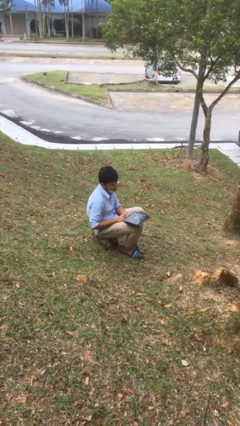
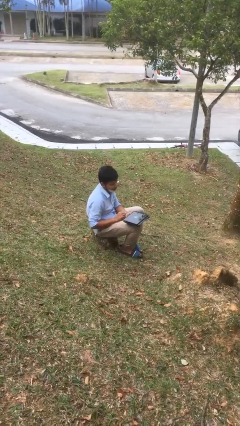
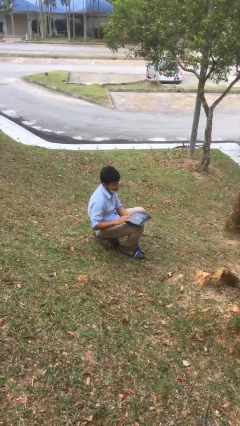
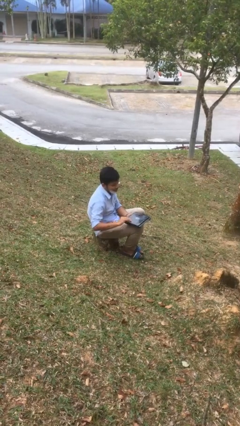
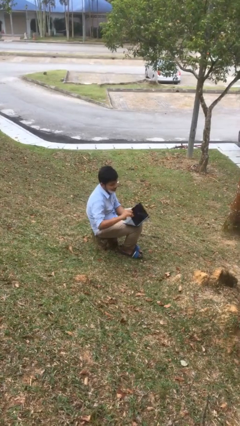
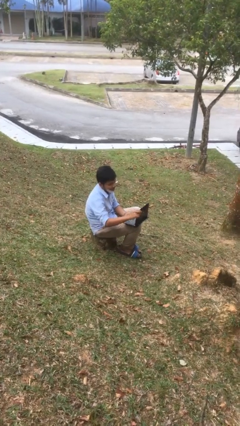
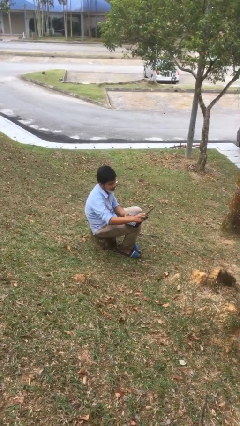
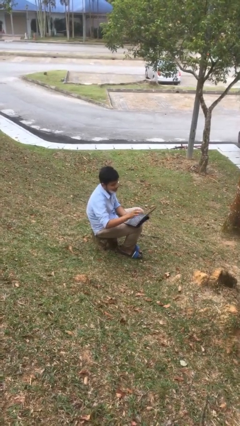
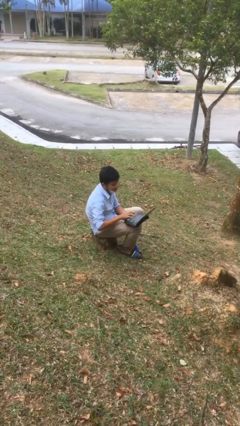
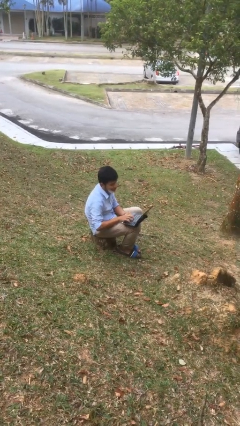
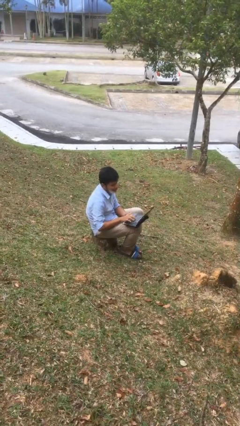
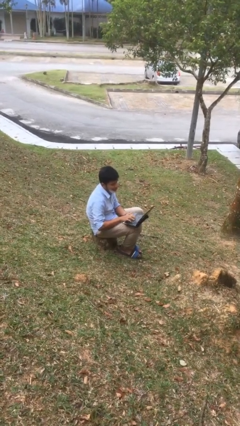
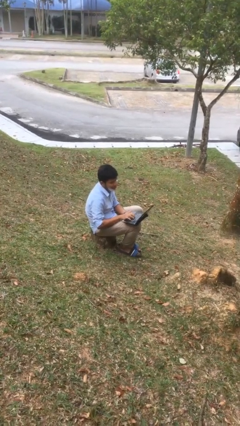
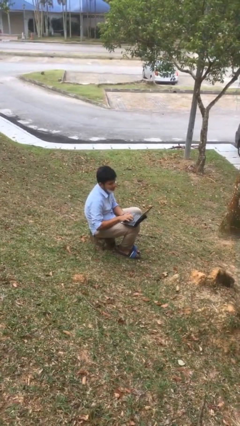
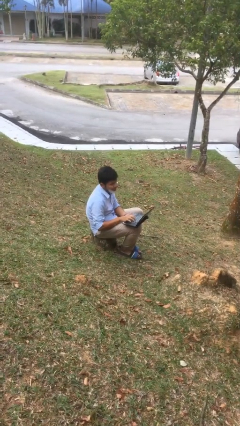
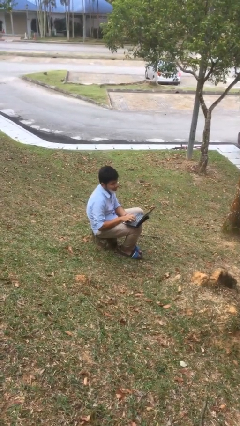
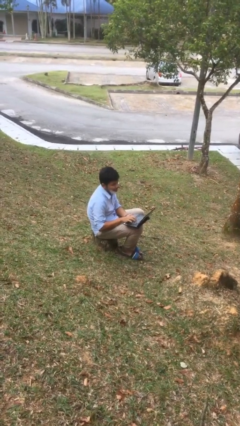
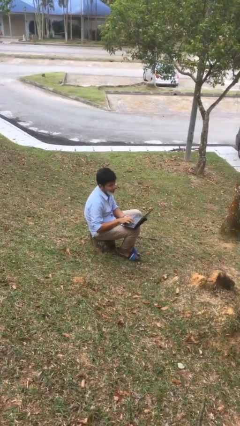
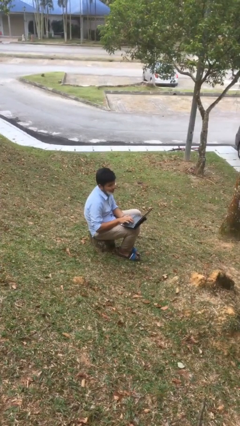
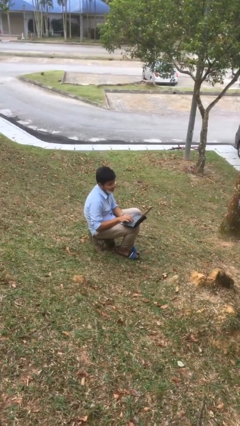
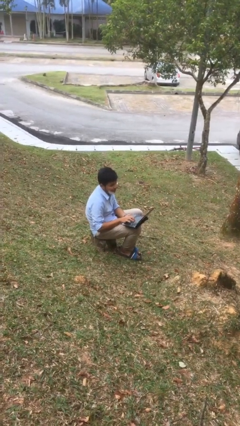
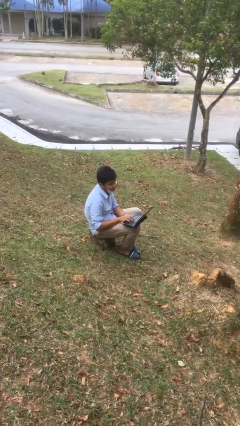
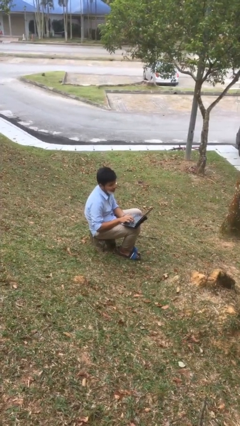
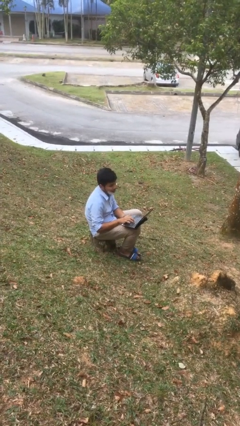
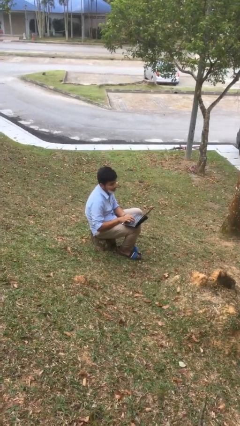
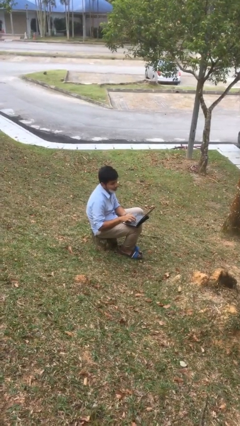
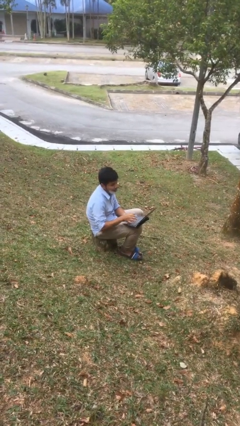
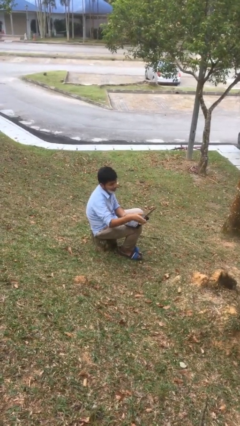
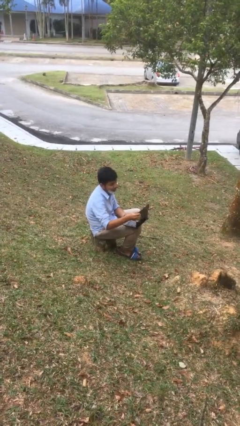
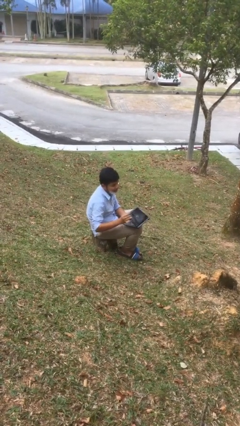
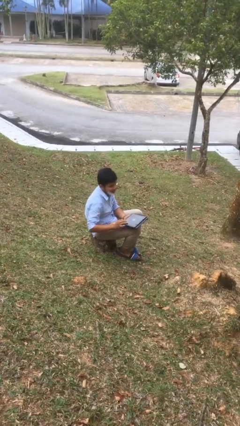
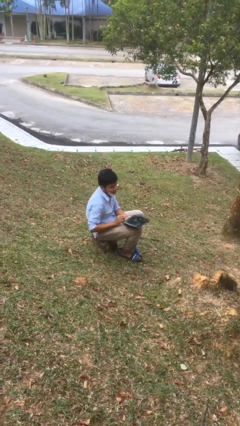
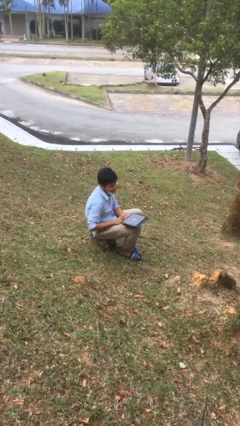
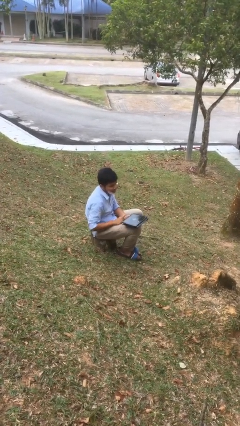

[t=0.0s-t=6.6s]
person interacts with laptop

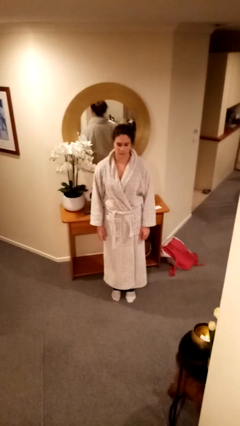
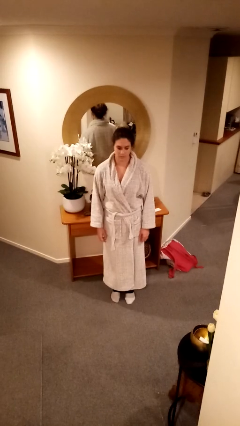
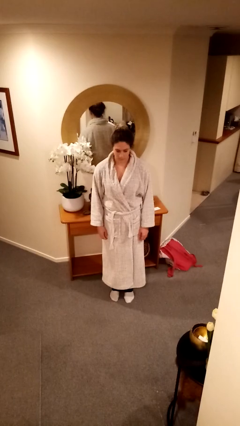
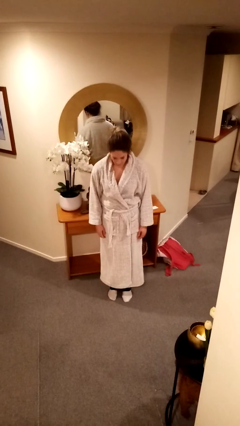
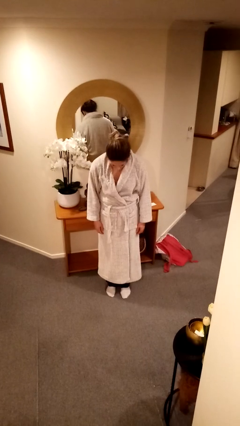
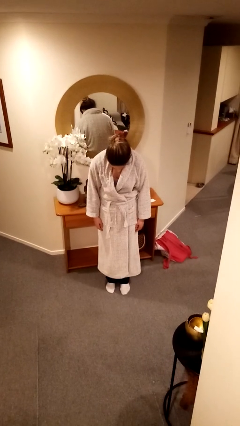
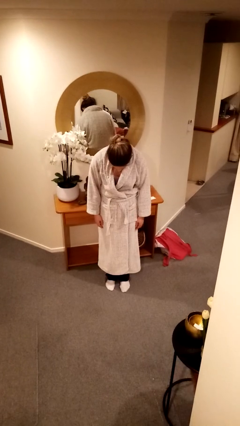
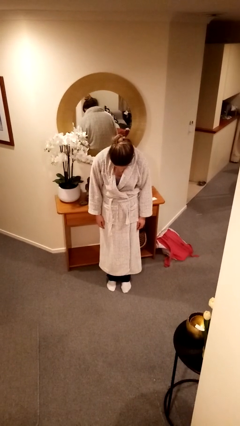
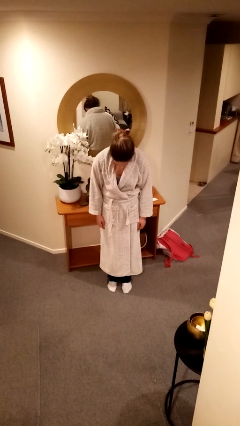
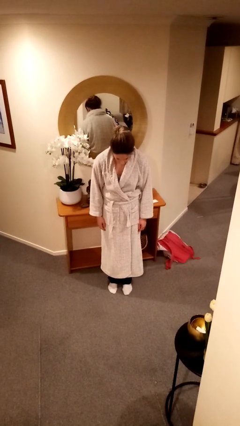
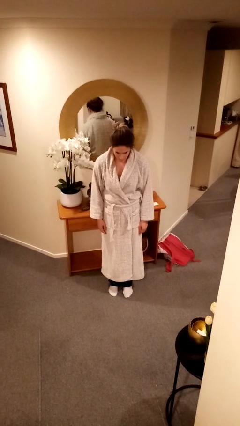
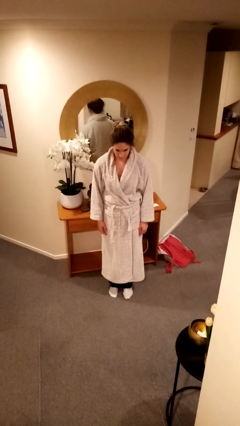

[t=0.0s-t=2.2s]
person bows

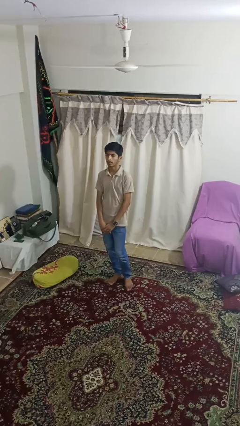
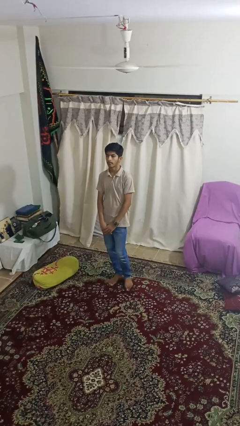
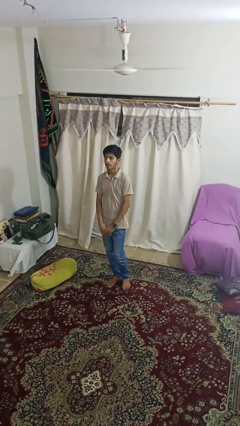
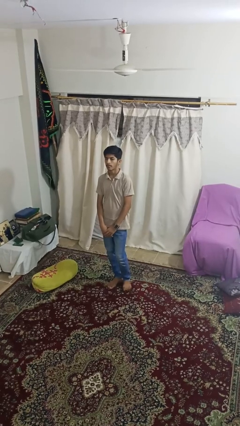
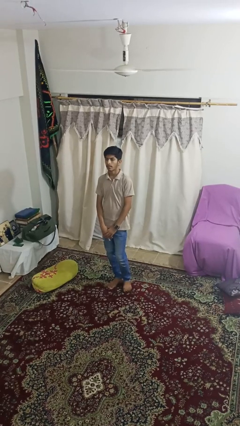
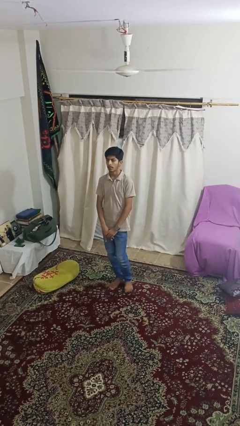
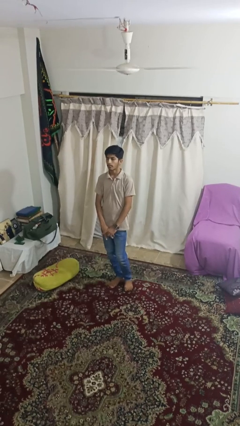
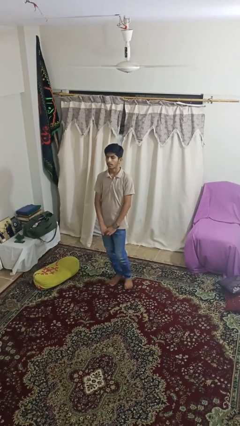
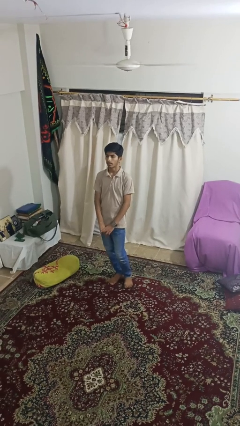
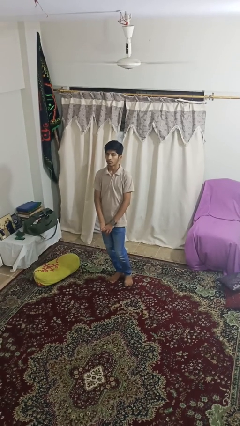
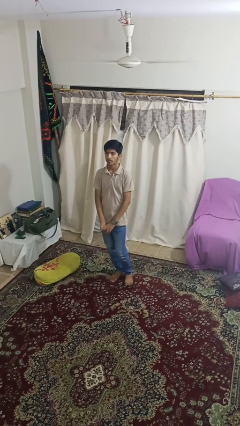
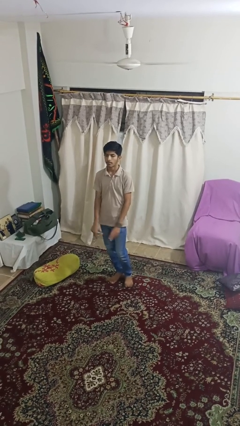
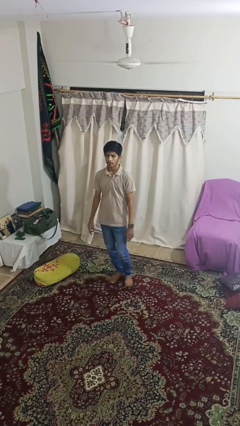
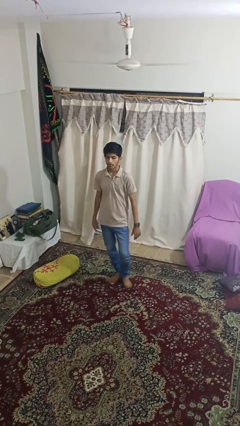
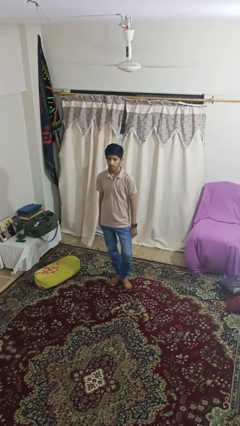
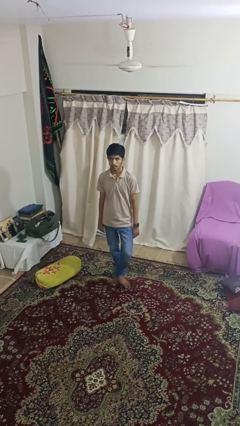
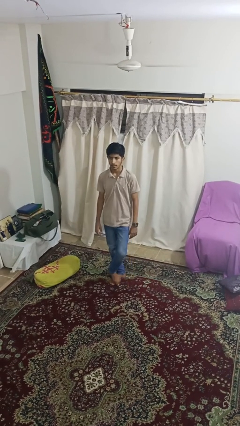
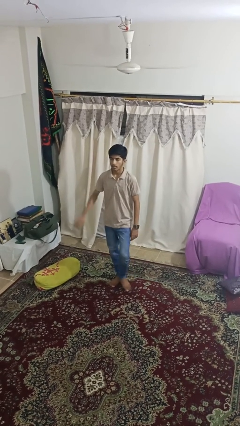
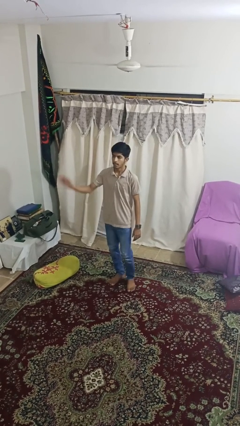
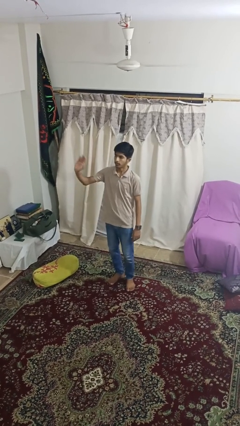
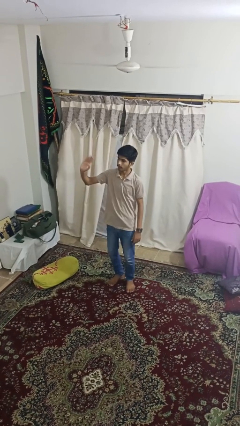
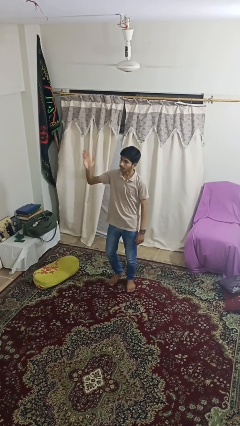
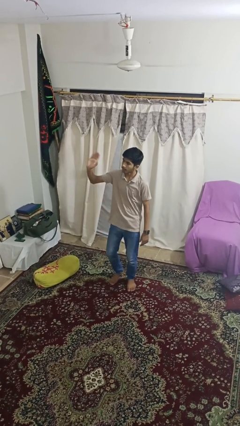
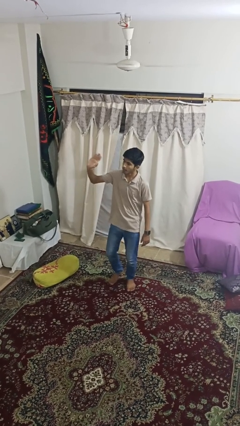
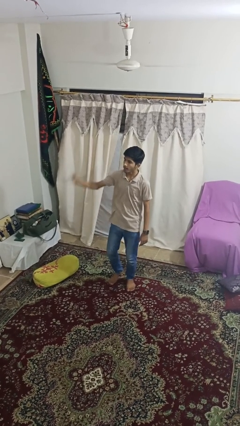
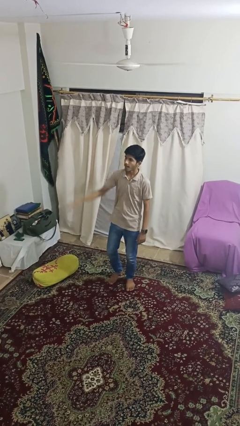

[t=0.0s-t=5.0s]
person waves at person

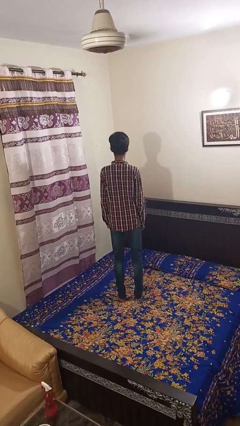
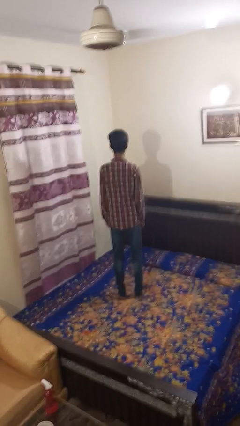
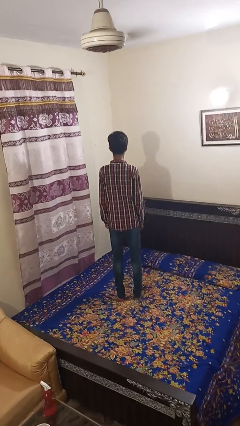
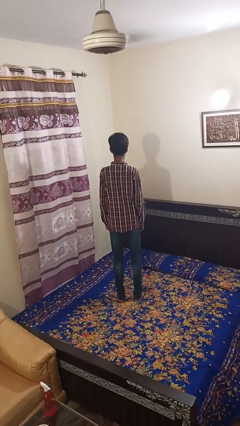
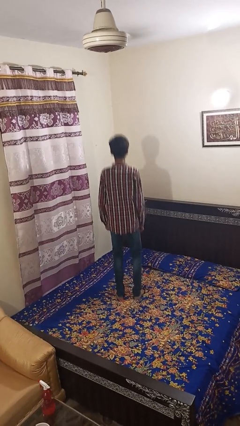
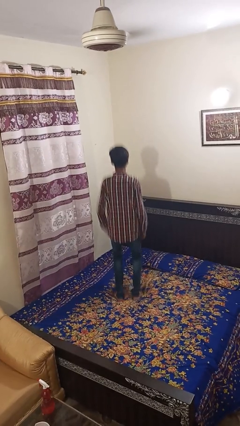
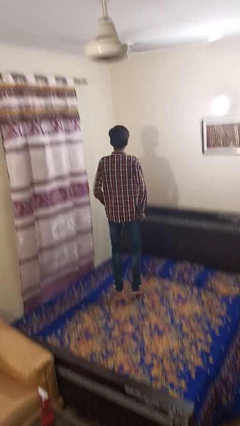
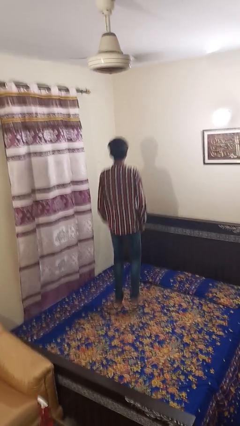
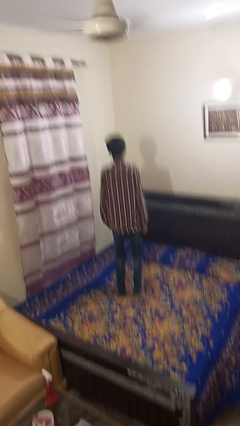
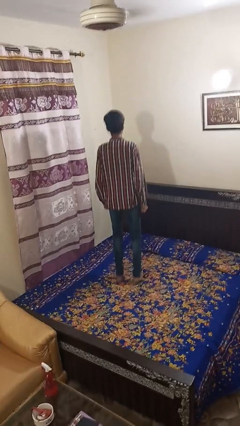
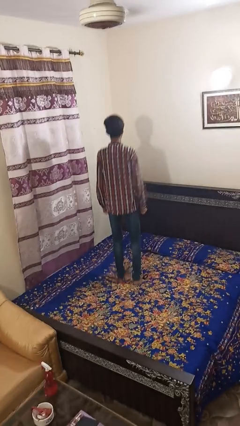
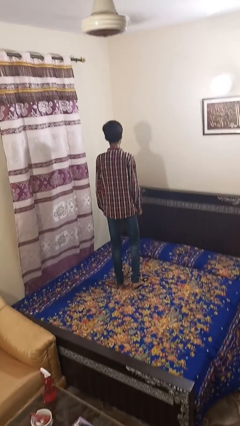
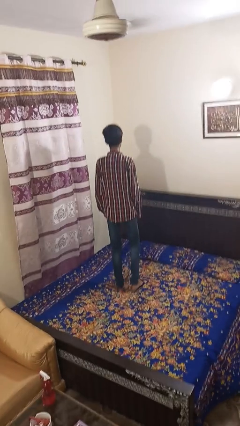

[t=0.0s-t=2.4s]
person jumps on bed

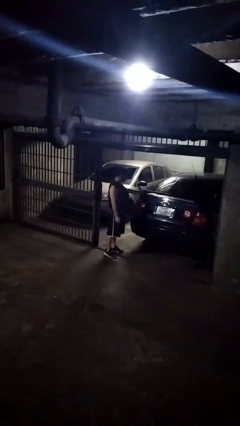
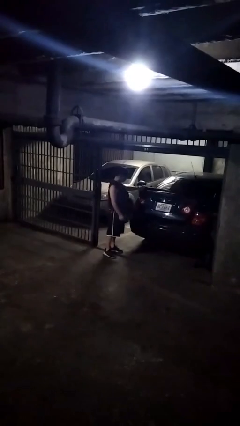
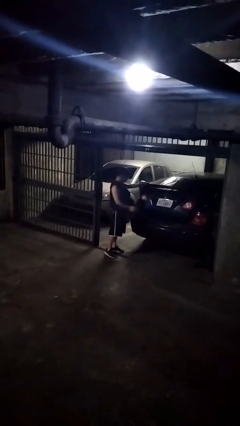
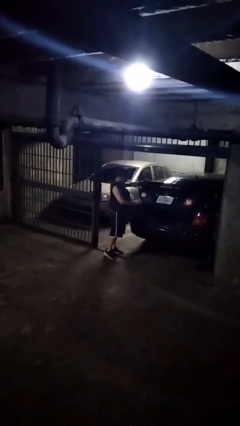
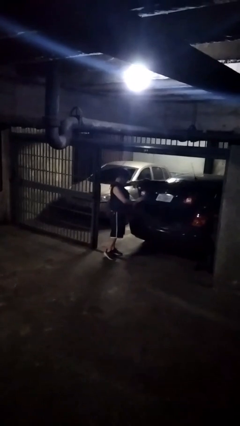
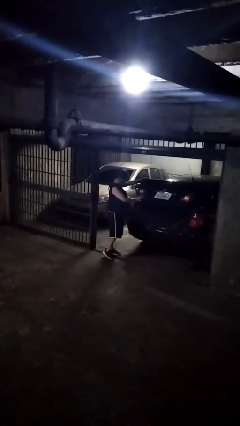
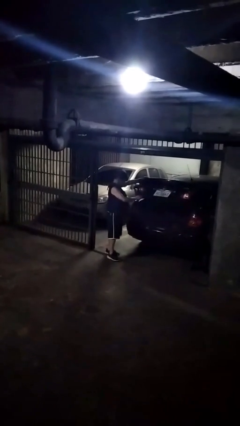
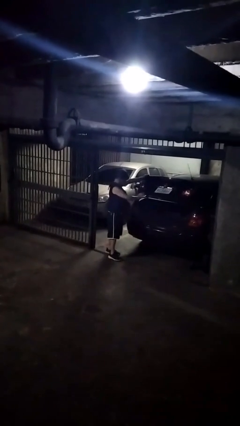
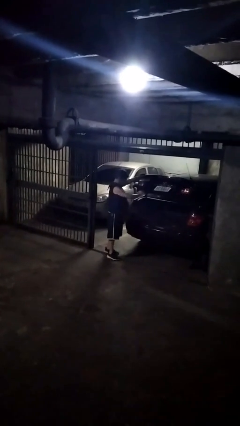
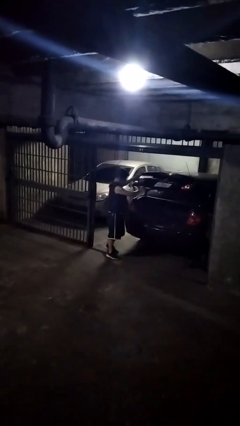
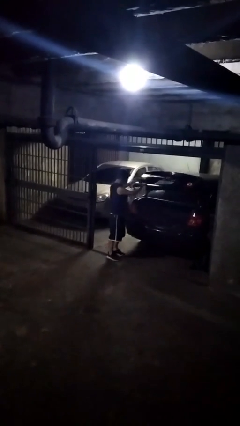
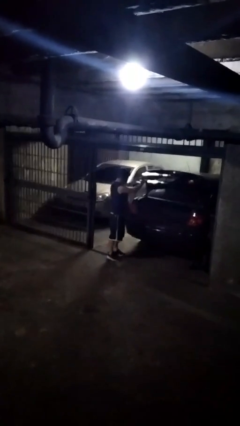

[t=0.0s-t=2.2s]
person opens car trunk
